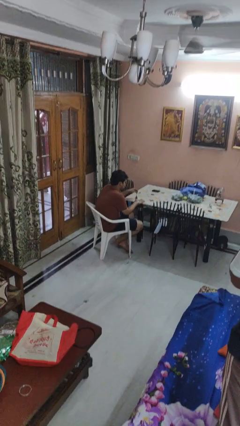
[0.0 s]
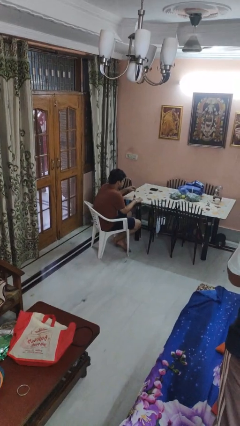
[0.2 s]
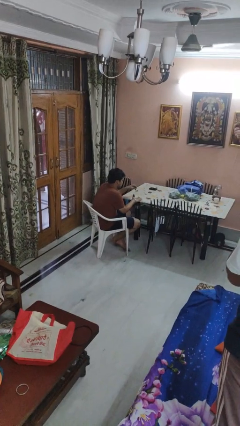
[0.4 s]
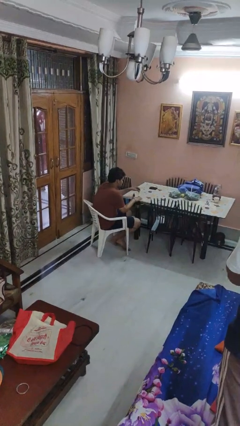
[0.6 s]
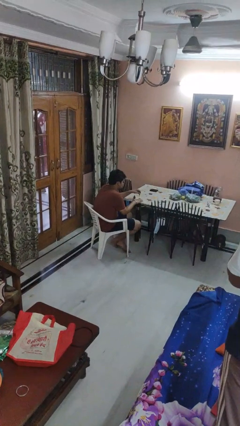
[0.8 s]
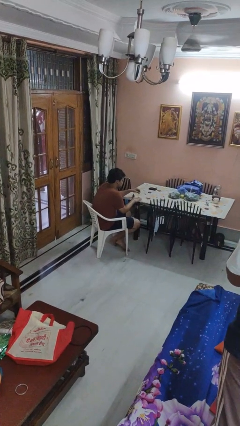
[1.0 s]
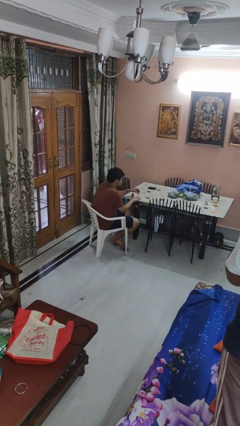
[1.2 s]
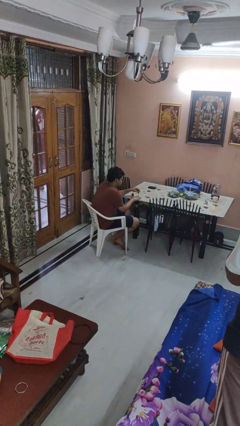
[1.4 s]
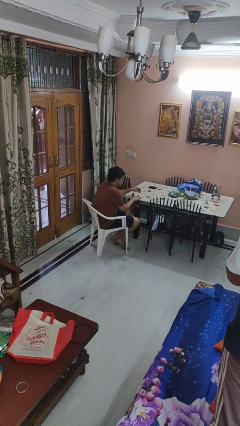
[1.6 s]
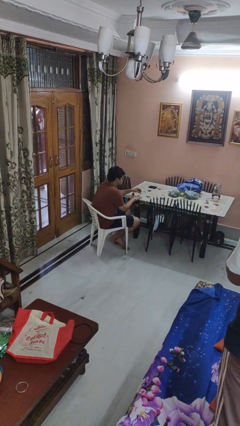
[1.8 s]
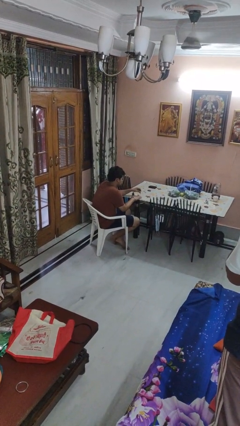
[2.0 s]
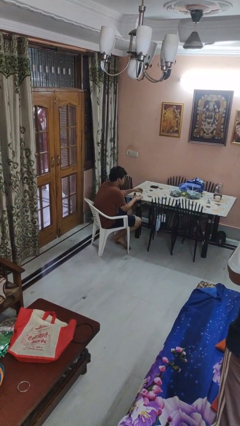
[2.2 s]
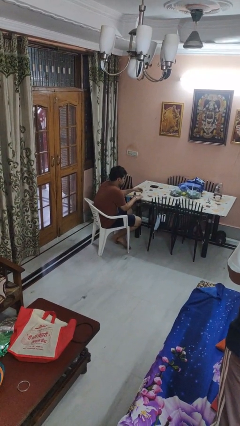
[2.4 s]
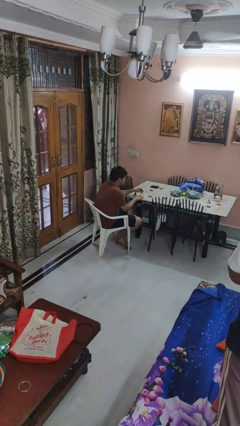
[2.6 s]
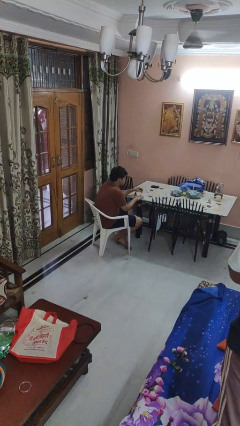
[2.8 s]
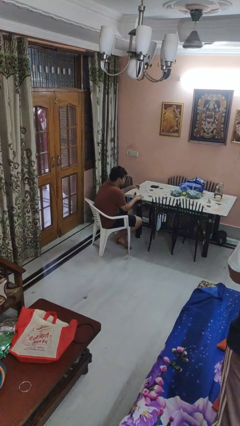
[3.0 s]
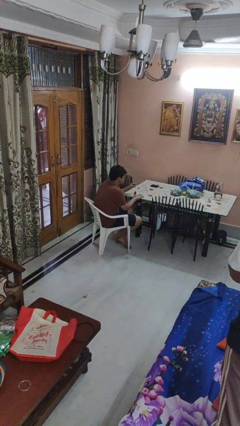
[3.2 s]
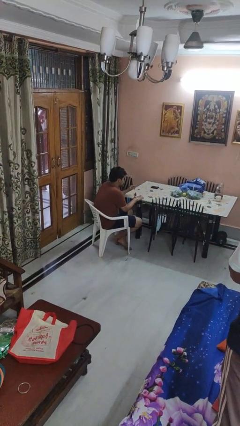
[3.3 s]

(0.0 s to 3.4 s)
person paints fingernails

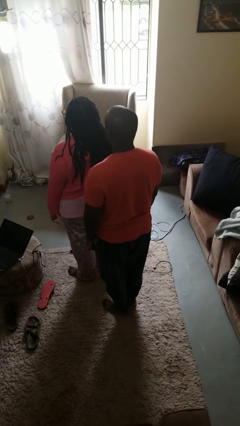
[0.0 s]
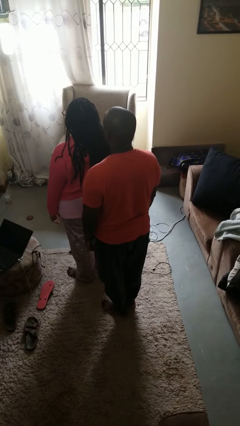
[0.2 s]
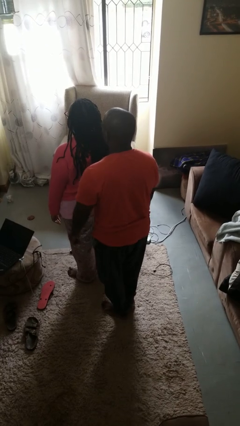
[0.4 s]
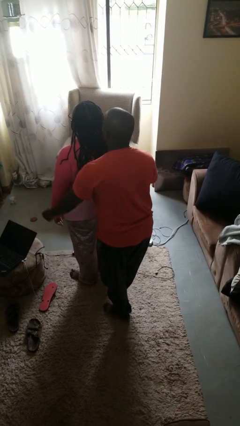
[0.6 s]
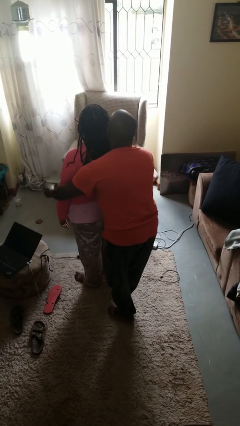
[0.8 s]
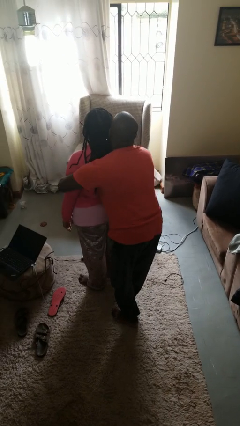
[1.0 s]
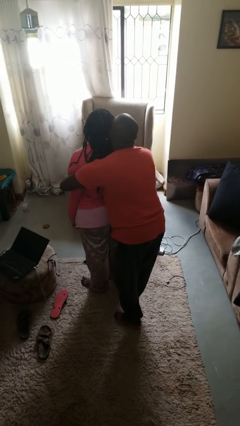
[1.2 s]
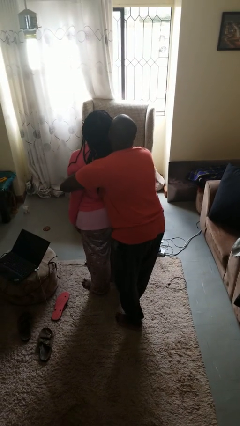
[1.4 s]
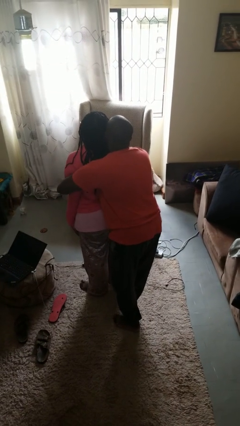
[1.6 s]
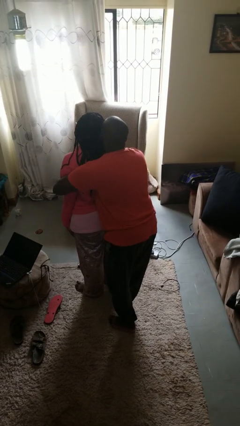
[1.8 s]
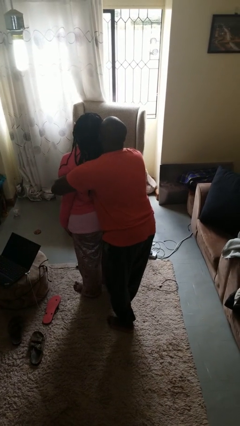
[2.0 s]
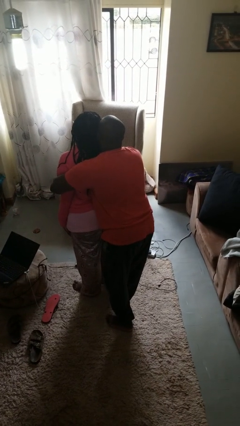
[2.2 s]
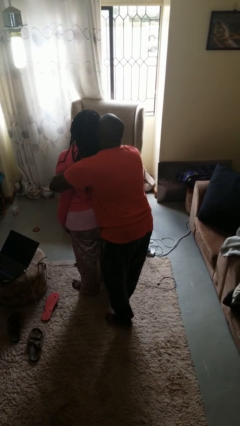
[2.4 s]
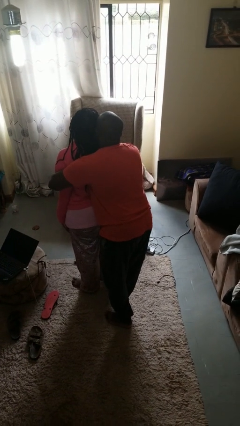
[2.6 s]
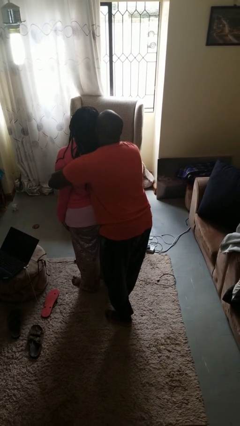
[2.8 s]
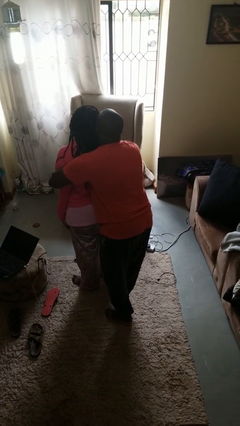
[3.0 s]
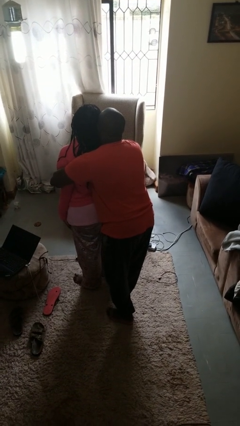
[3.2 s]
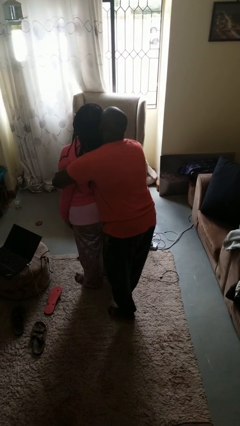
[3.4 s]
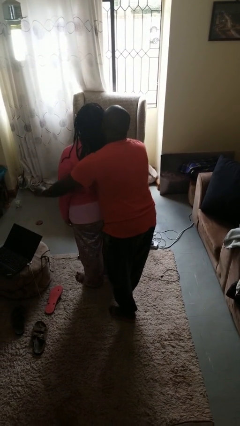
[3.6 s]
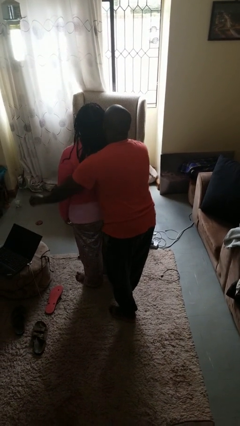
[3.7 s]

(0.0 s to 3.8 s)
person hugs person from behind

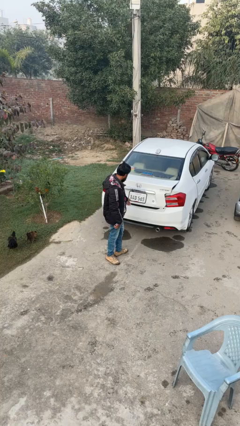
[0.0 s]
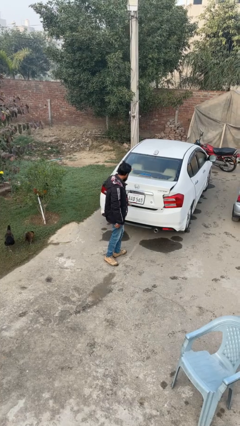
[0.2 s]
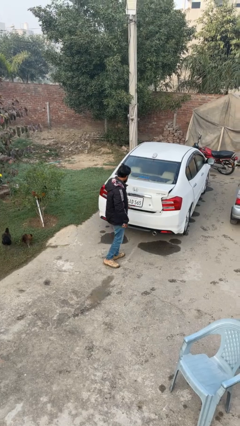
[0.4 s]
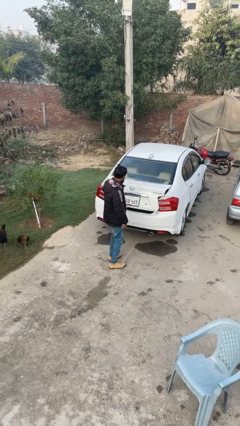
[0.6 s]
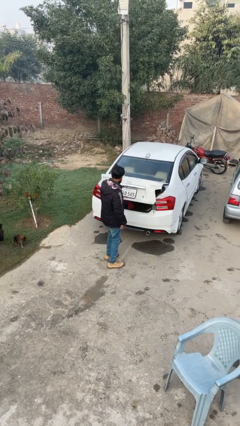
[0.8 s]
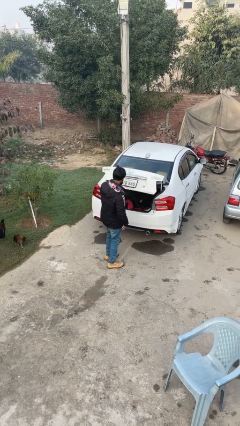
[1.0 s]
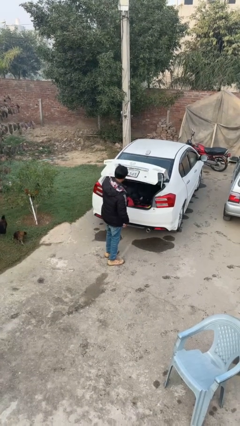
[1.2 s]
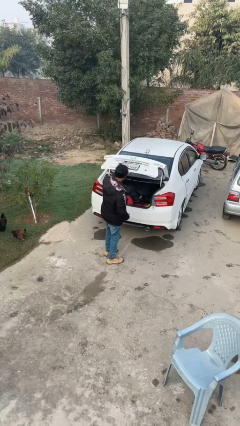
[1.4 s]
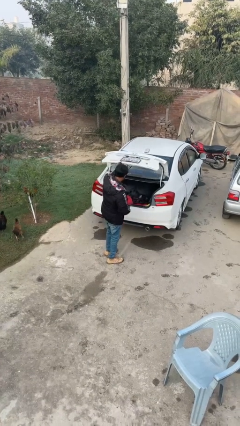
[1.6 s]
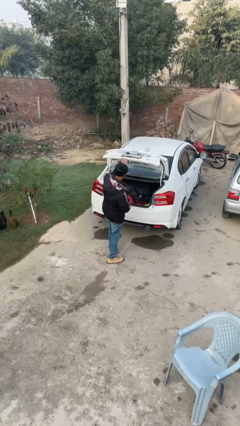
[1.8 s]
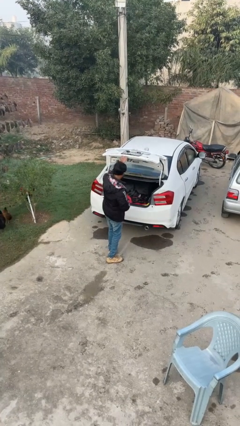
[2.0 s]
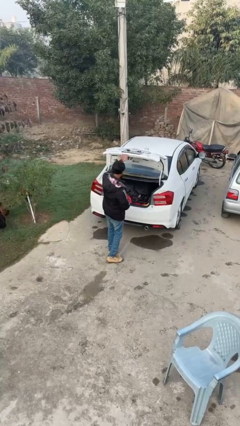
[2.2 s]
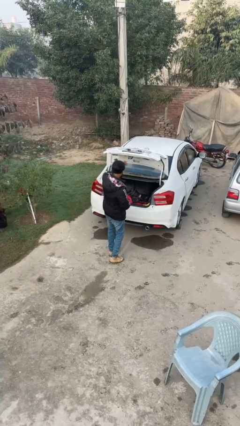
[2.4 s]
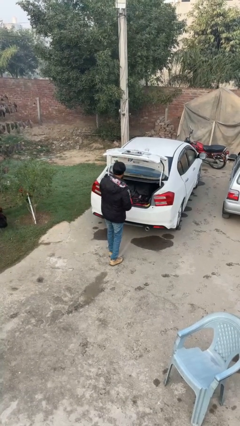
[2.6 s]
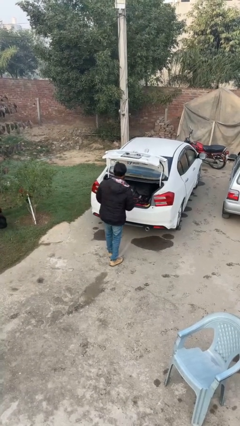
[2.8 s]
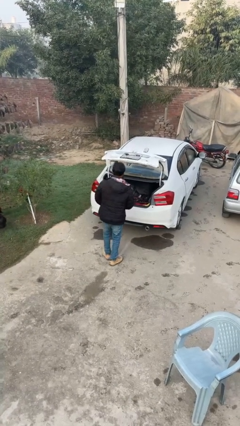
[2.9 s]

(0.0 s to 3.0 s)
person opens car trunk

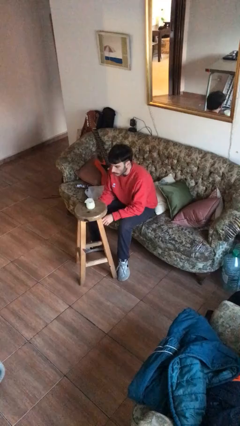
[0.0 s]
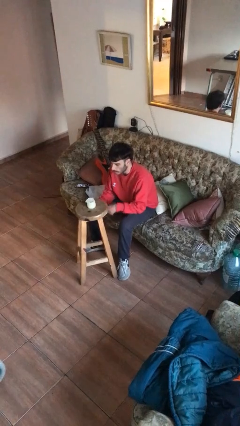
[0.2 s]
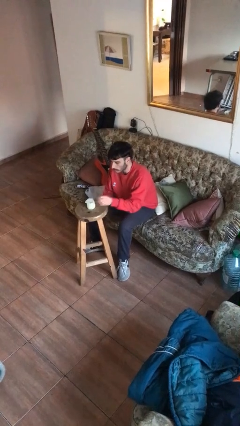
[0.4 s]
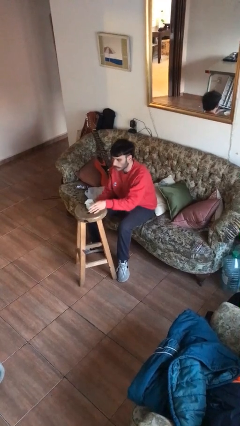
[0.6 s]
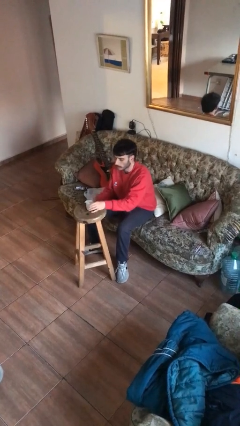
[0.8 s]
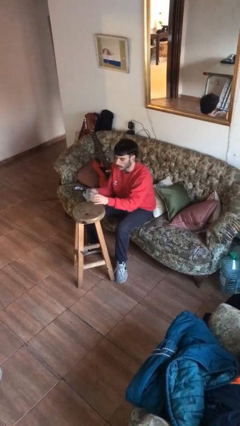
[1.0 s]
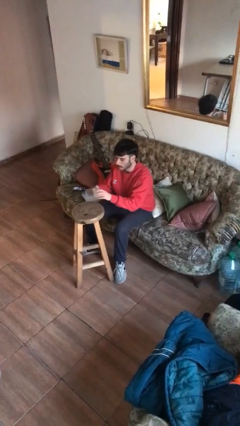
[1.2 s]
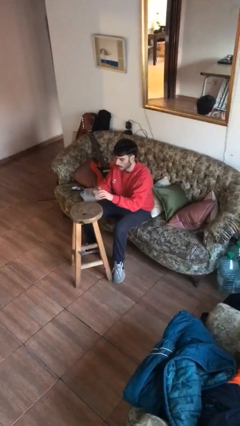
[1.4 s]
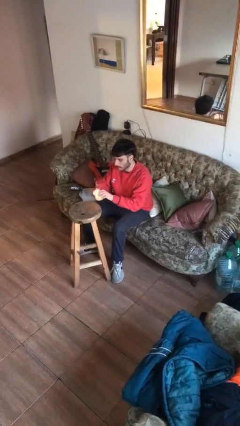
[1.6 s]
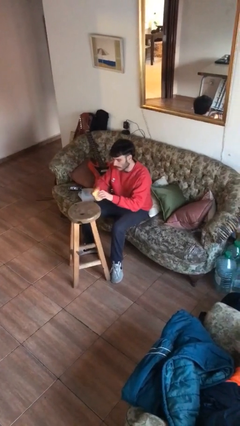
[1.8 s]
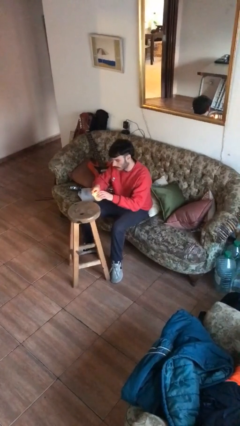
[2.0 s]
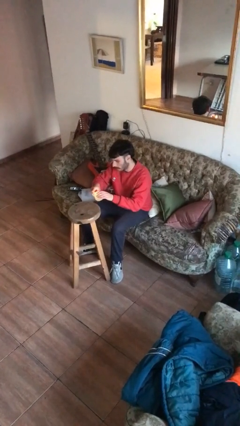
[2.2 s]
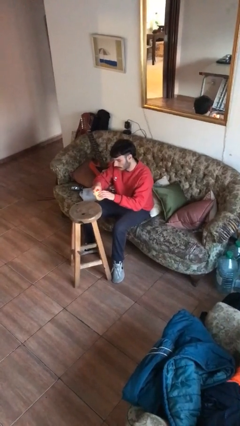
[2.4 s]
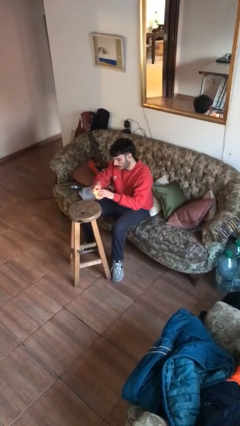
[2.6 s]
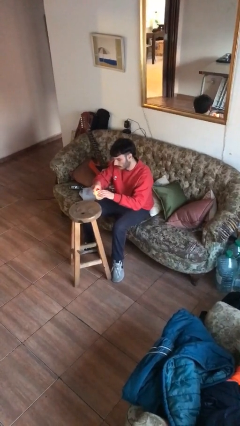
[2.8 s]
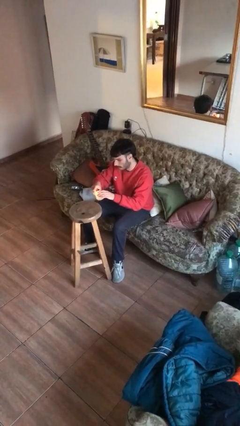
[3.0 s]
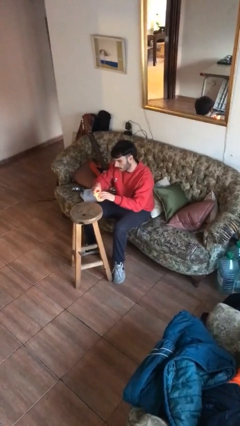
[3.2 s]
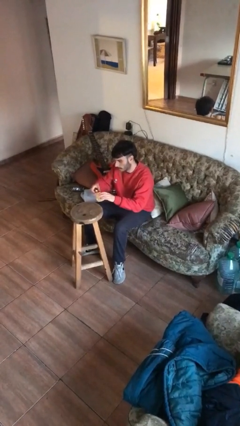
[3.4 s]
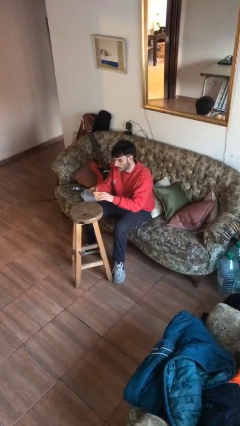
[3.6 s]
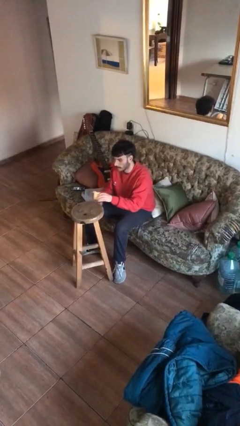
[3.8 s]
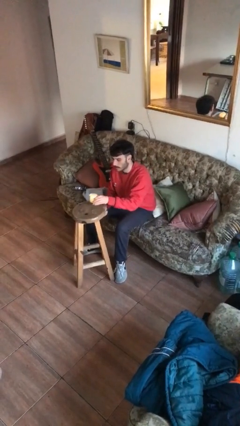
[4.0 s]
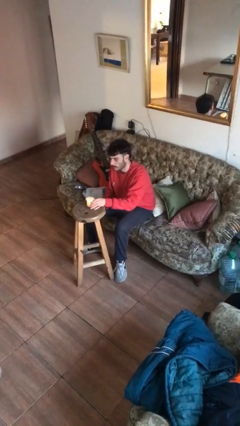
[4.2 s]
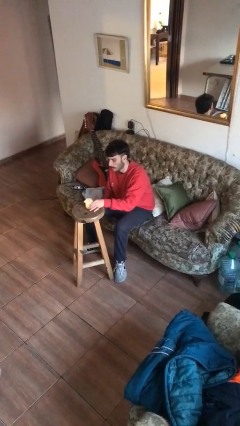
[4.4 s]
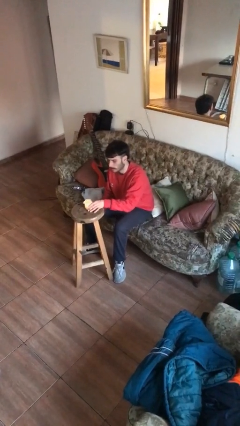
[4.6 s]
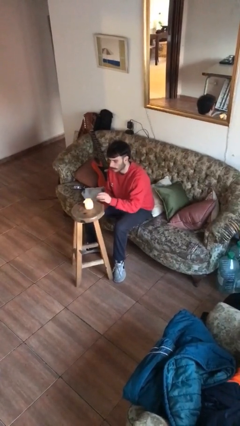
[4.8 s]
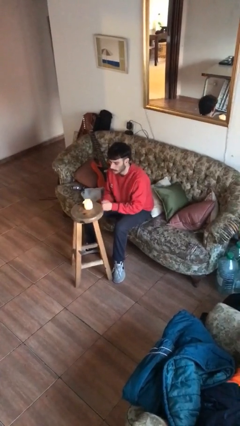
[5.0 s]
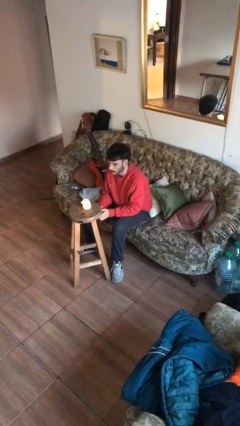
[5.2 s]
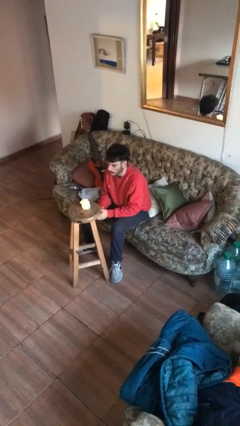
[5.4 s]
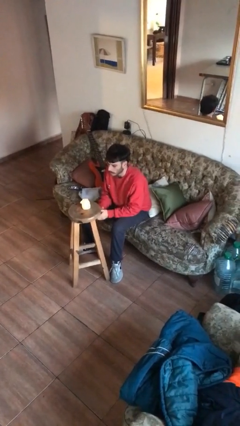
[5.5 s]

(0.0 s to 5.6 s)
person lights candle

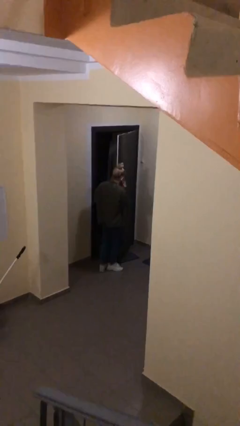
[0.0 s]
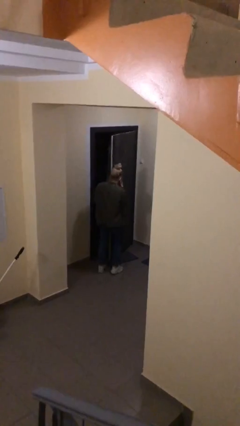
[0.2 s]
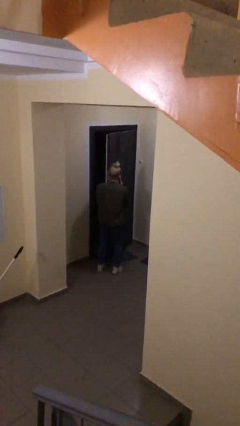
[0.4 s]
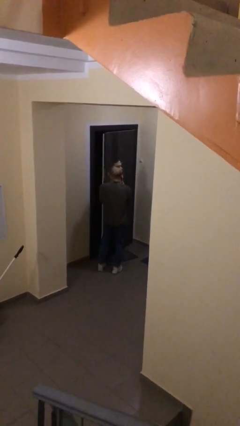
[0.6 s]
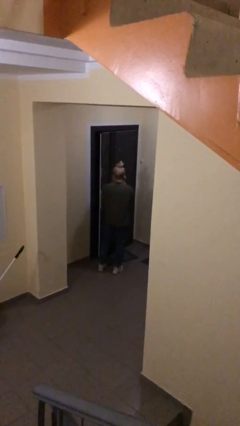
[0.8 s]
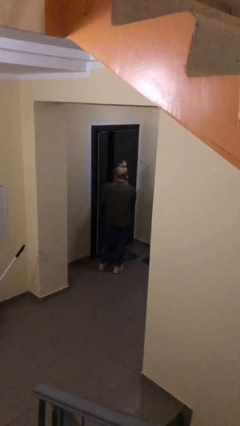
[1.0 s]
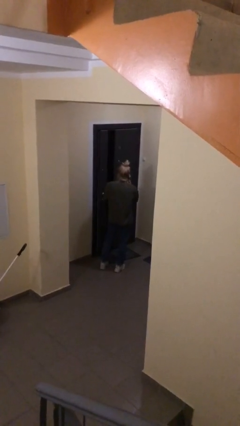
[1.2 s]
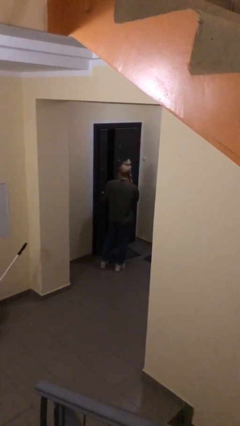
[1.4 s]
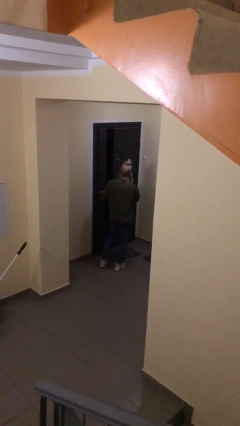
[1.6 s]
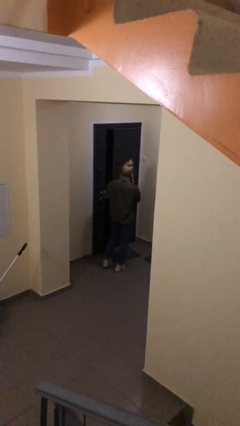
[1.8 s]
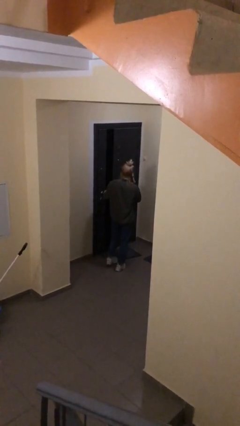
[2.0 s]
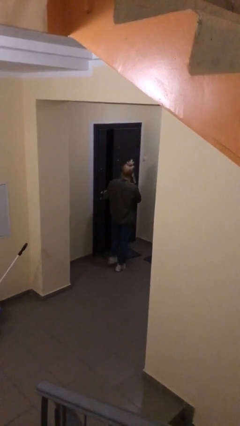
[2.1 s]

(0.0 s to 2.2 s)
person closes facility door
